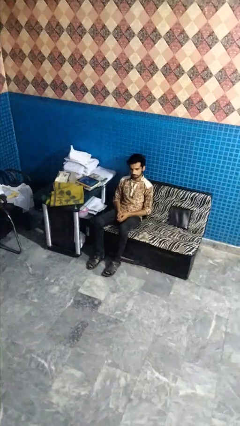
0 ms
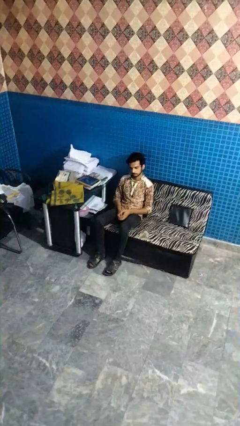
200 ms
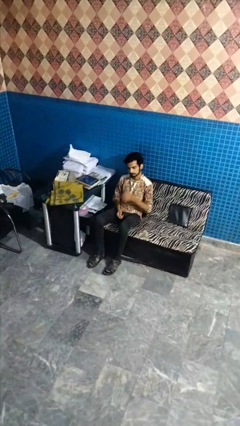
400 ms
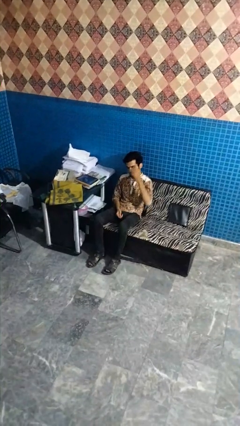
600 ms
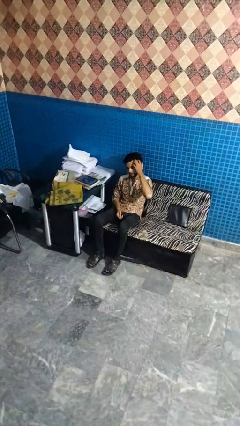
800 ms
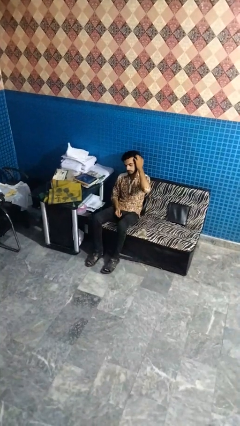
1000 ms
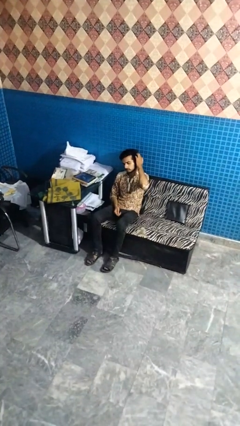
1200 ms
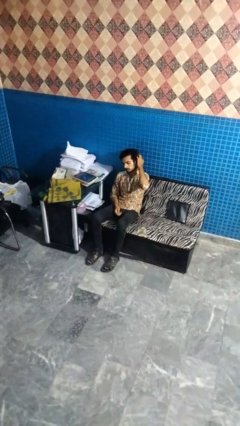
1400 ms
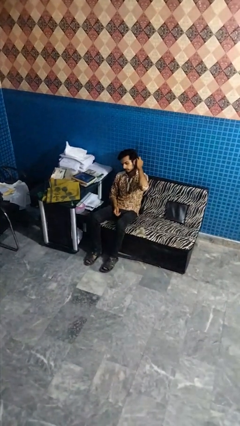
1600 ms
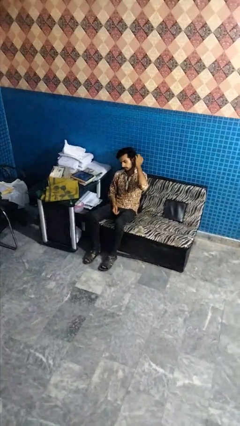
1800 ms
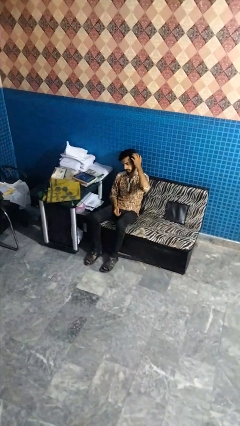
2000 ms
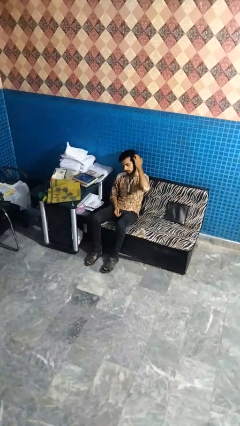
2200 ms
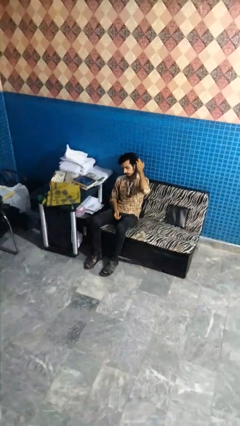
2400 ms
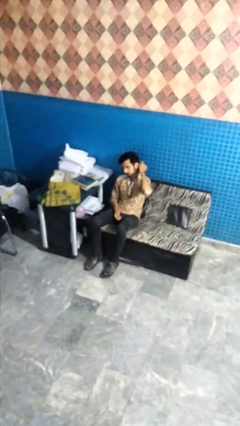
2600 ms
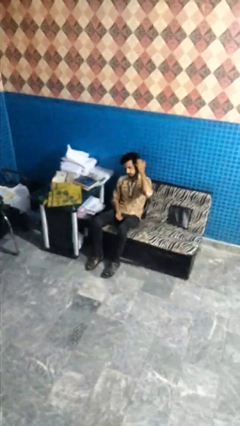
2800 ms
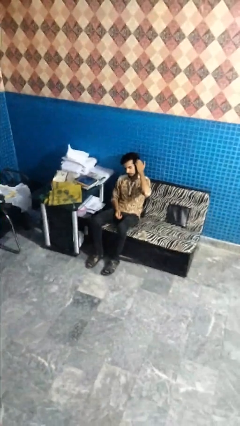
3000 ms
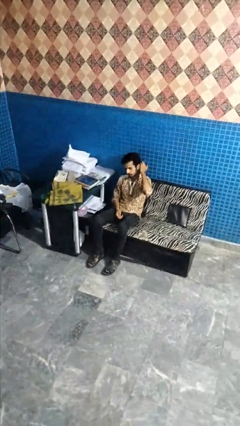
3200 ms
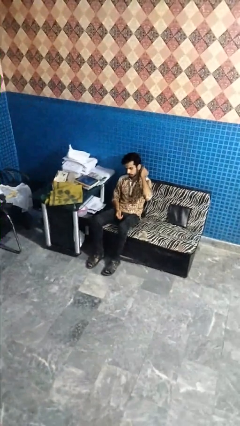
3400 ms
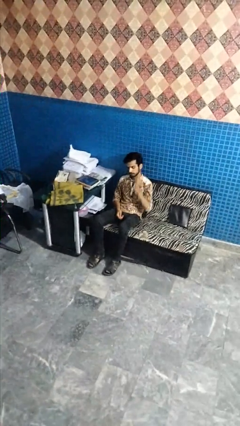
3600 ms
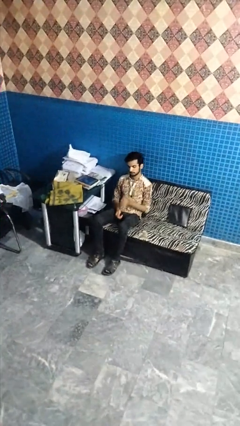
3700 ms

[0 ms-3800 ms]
person strokes hair

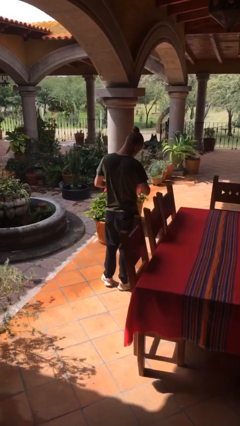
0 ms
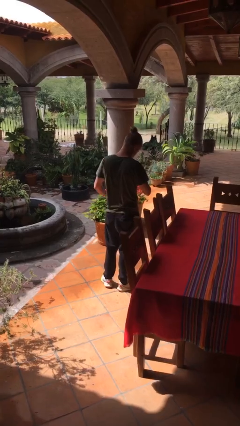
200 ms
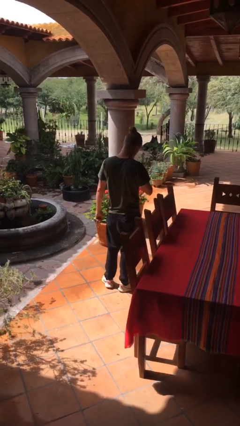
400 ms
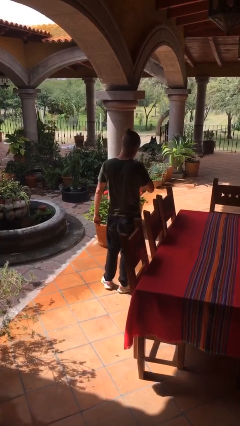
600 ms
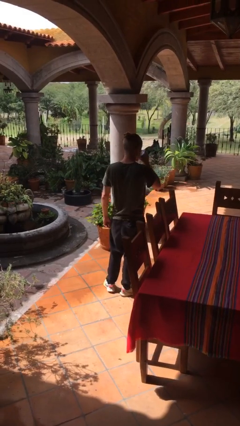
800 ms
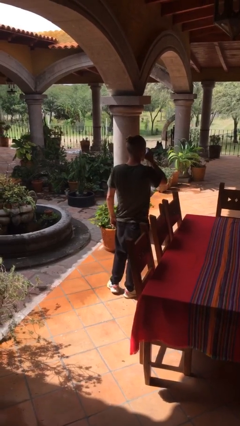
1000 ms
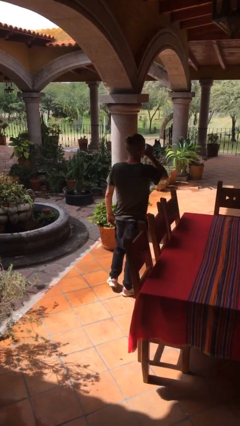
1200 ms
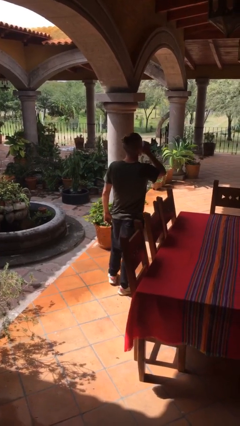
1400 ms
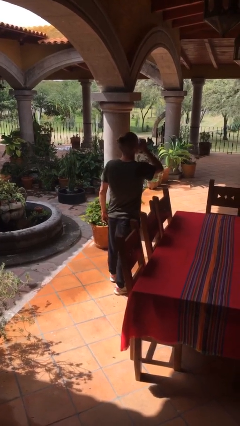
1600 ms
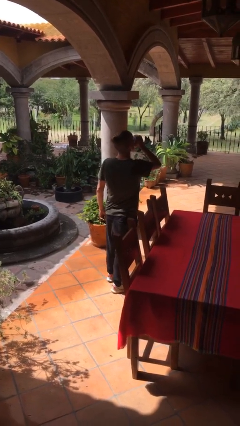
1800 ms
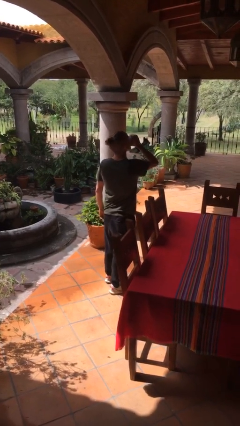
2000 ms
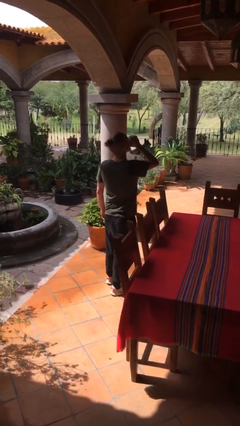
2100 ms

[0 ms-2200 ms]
person drinks from beverage can

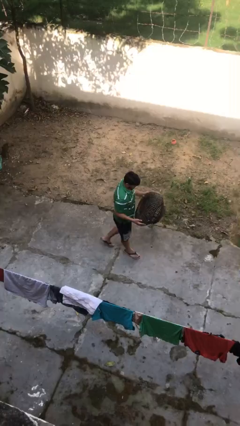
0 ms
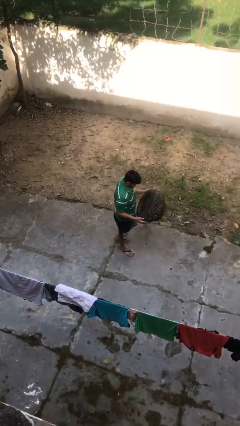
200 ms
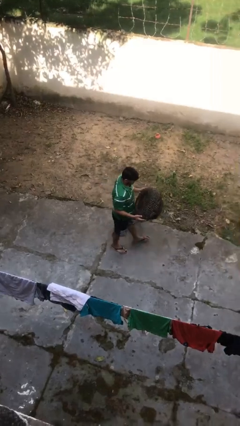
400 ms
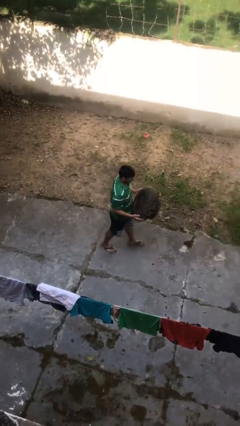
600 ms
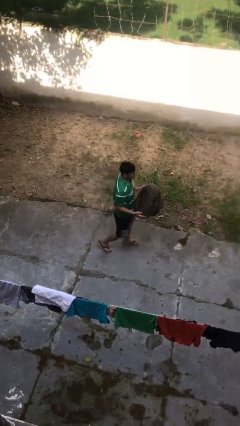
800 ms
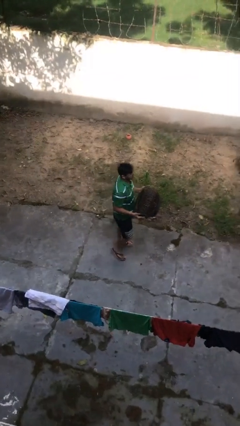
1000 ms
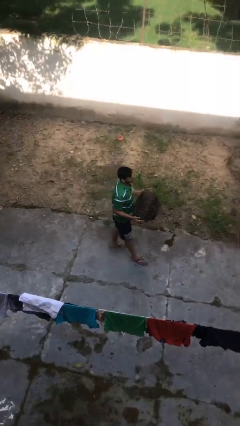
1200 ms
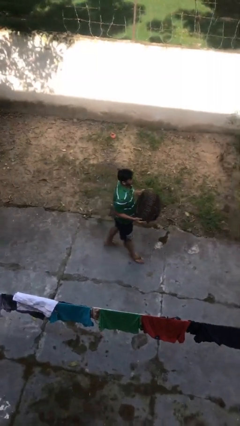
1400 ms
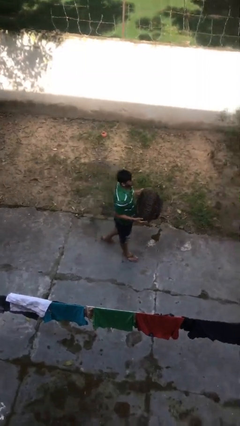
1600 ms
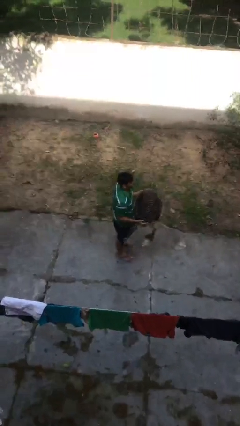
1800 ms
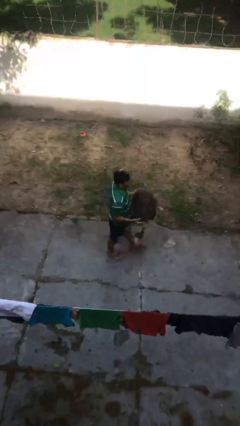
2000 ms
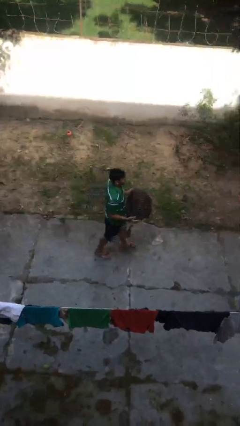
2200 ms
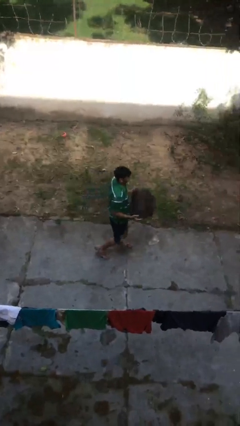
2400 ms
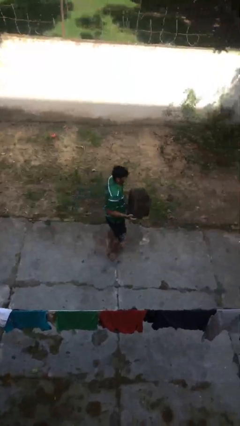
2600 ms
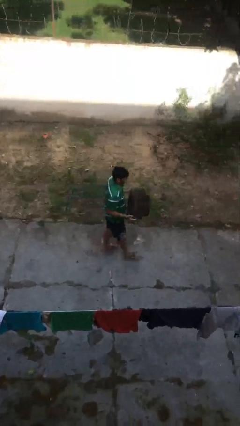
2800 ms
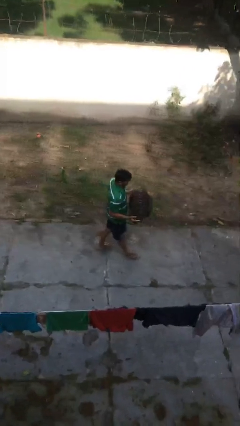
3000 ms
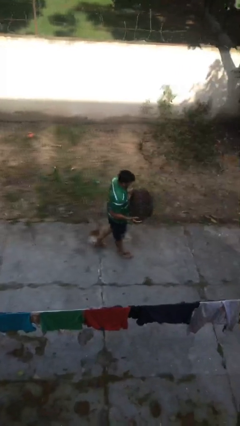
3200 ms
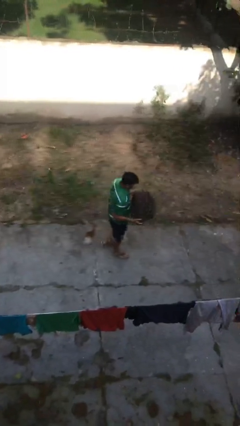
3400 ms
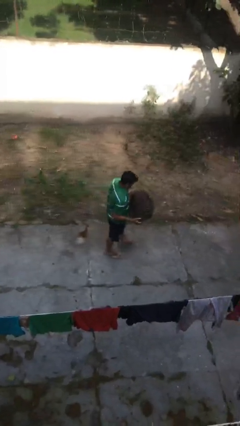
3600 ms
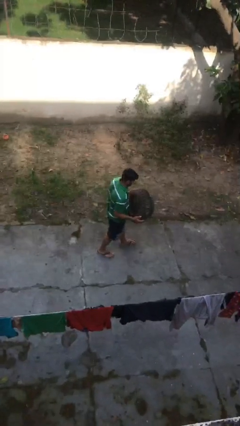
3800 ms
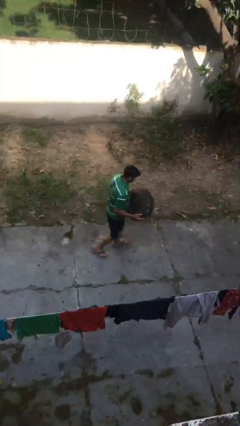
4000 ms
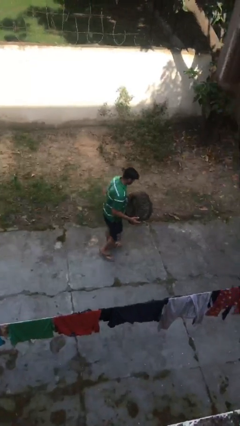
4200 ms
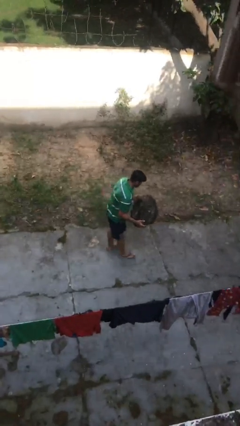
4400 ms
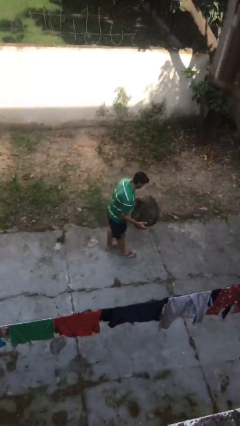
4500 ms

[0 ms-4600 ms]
person carries heavy object

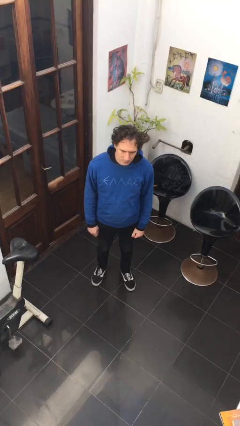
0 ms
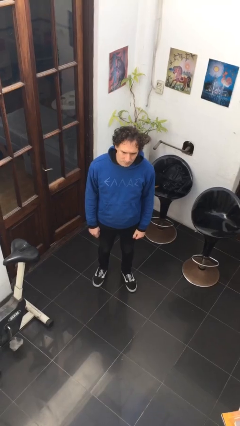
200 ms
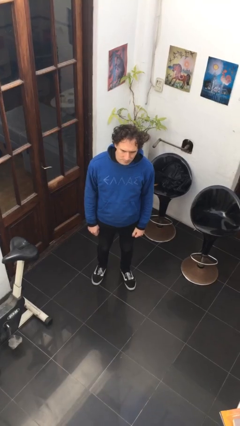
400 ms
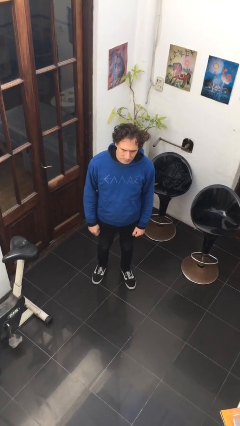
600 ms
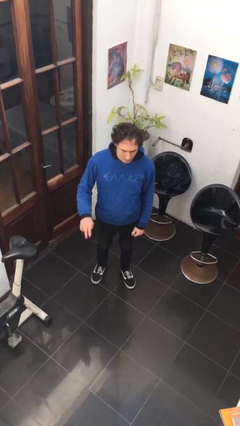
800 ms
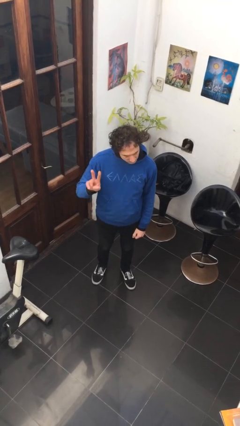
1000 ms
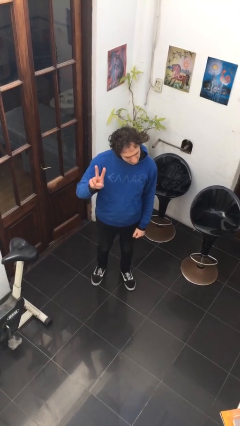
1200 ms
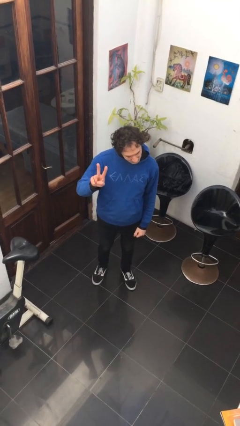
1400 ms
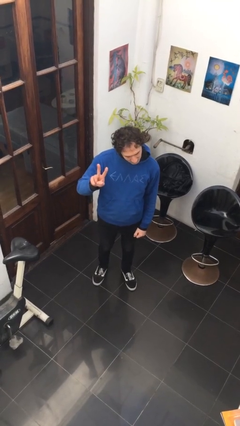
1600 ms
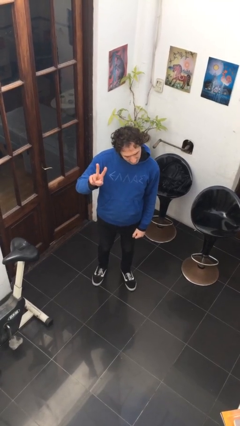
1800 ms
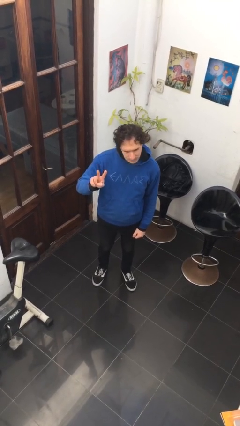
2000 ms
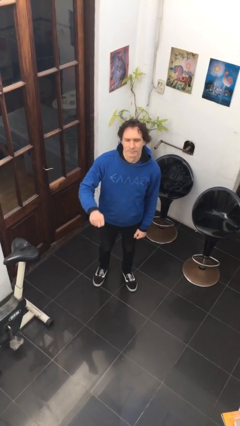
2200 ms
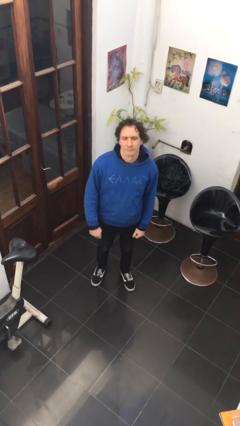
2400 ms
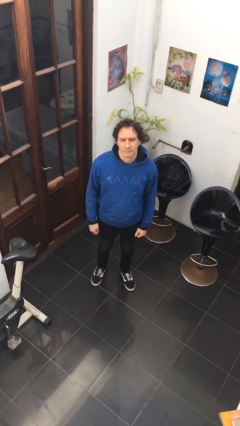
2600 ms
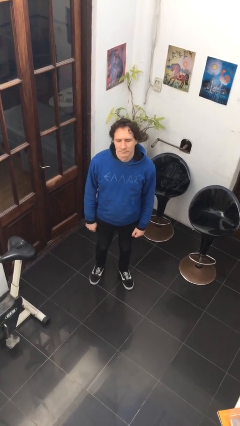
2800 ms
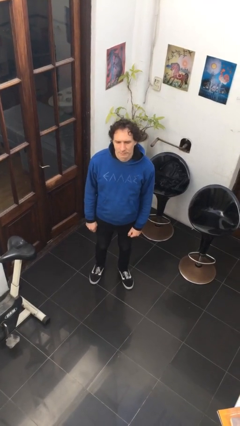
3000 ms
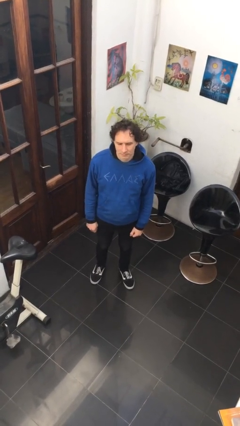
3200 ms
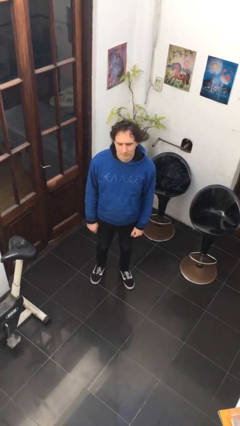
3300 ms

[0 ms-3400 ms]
person gestures peace

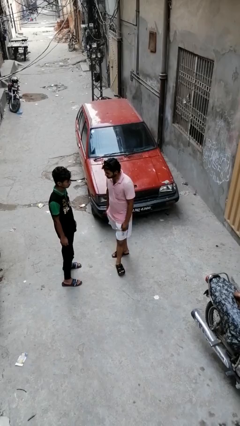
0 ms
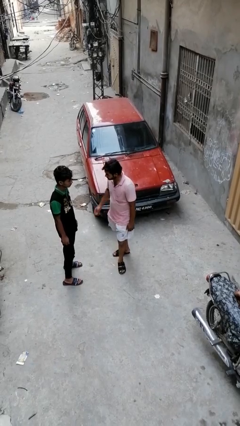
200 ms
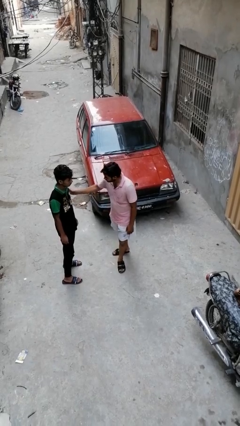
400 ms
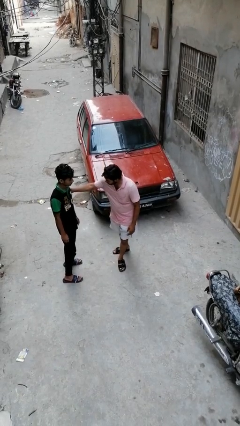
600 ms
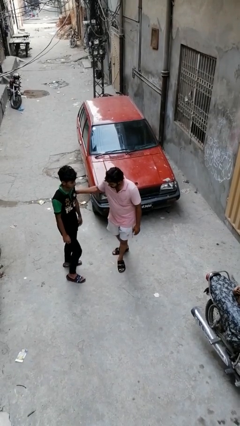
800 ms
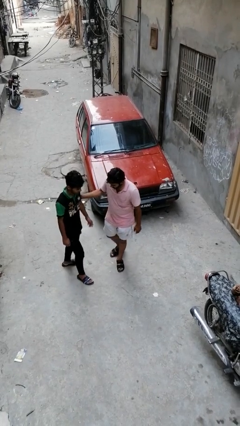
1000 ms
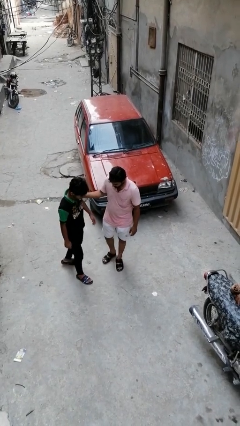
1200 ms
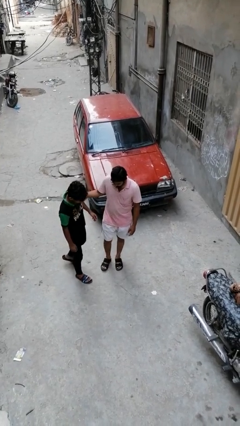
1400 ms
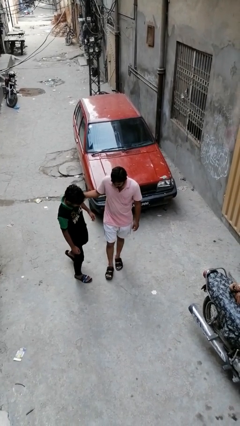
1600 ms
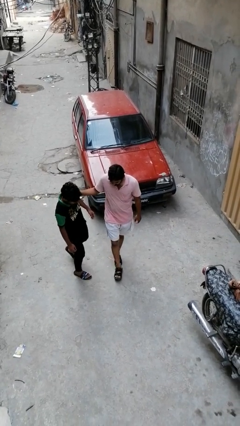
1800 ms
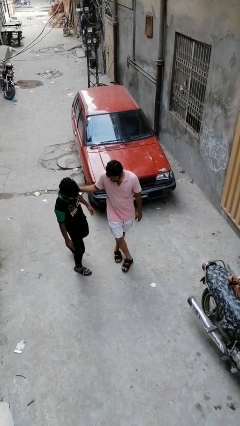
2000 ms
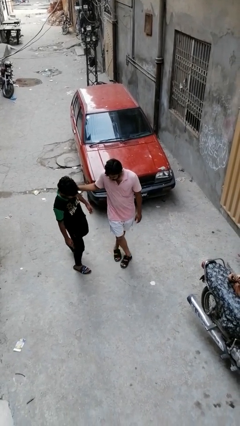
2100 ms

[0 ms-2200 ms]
person grabs person by bicep

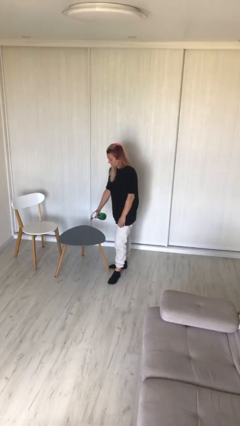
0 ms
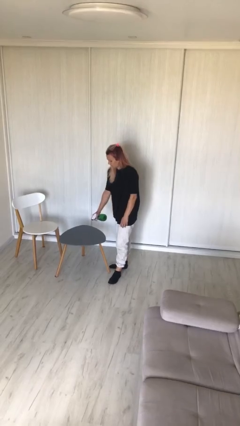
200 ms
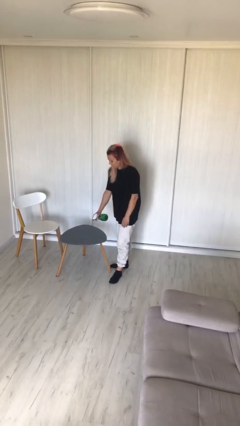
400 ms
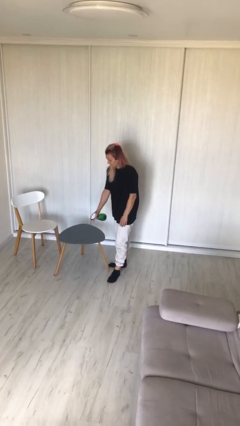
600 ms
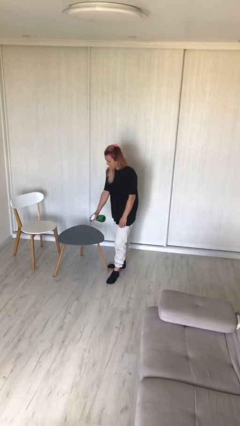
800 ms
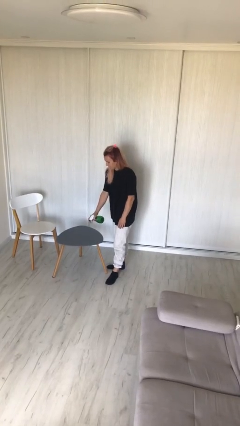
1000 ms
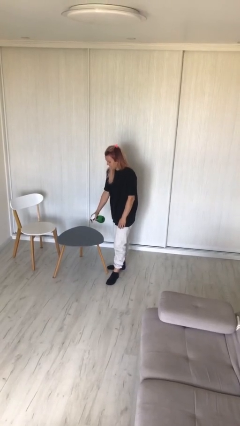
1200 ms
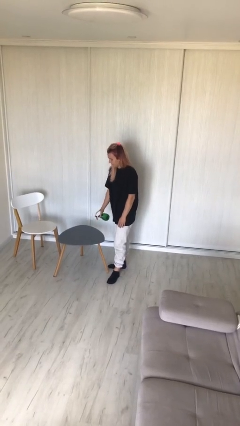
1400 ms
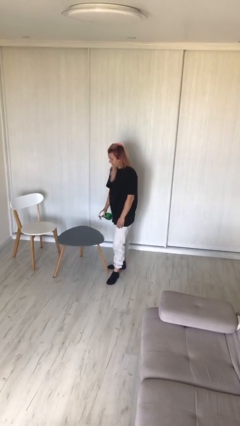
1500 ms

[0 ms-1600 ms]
person sprays from bottle
